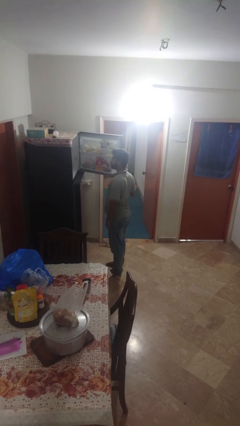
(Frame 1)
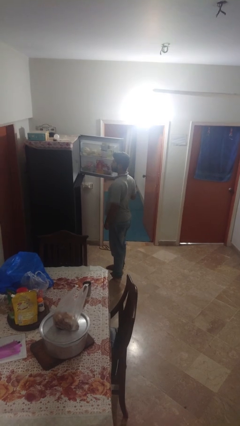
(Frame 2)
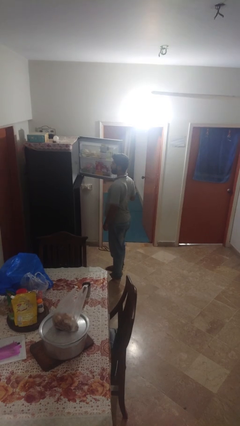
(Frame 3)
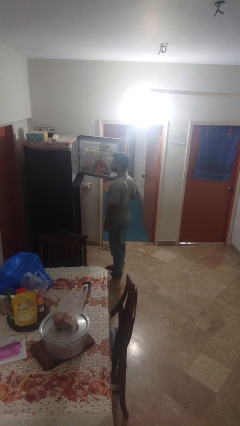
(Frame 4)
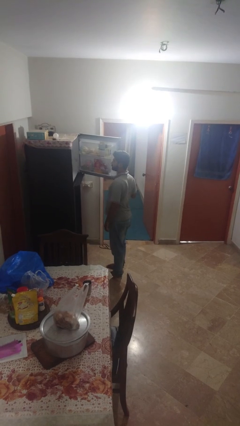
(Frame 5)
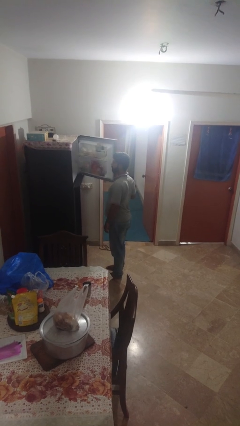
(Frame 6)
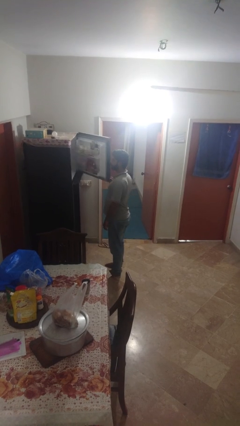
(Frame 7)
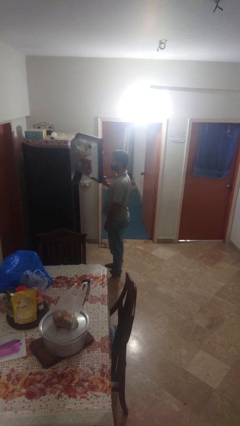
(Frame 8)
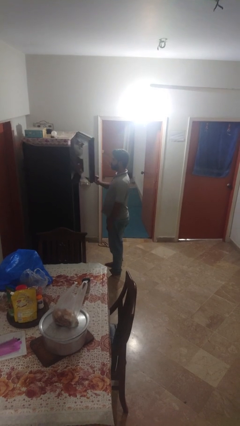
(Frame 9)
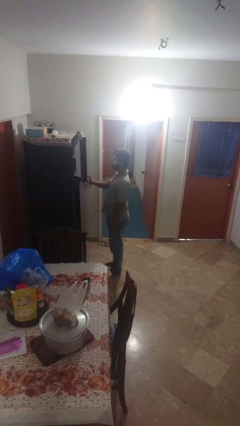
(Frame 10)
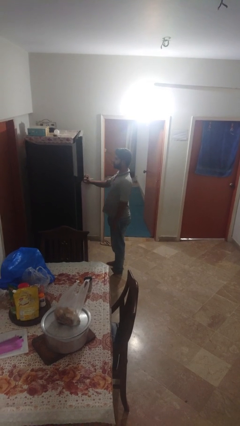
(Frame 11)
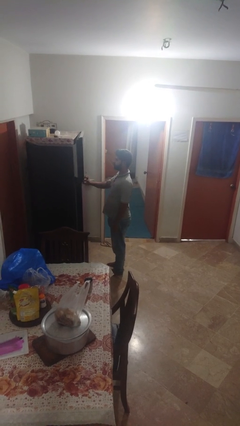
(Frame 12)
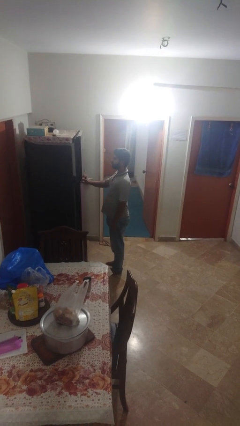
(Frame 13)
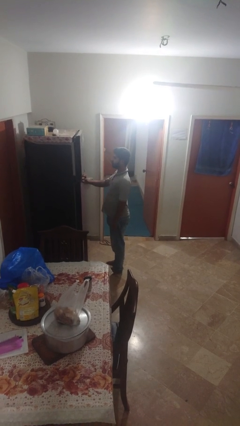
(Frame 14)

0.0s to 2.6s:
person closes refrigerator

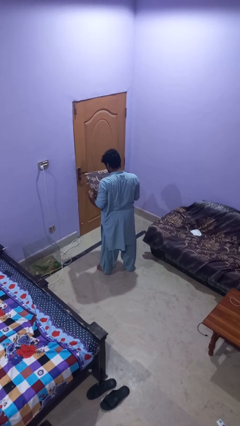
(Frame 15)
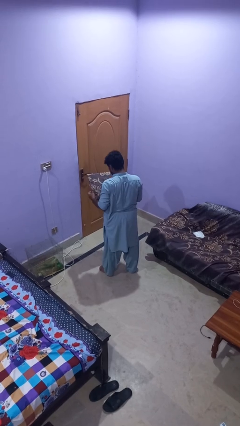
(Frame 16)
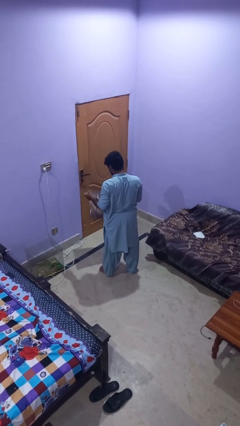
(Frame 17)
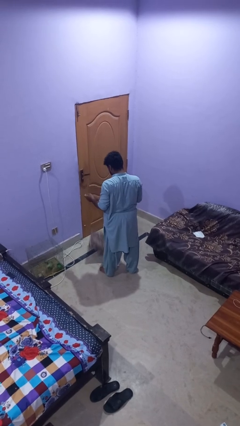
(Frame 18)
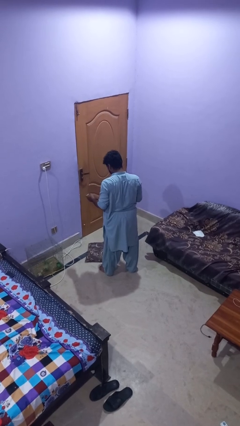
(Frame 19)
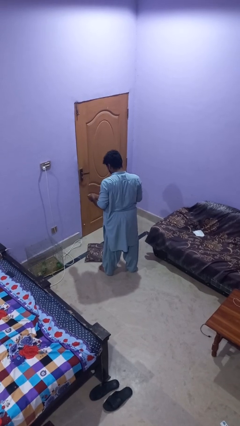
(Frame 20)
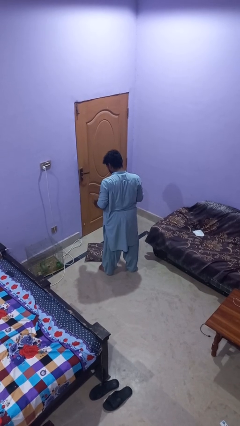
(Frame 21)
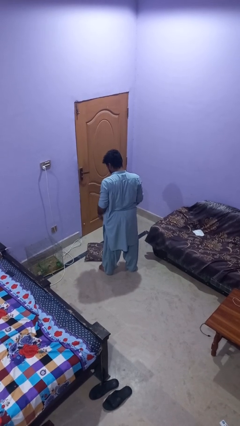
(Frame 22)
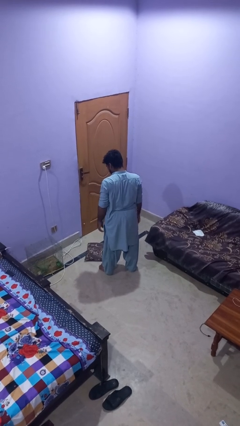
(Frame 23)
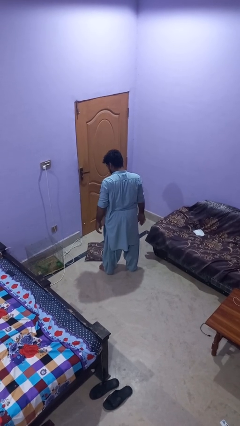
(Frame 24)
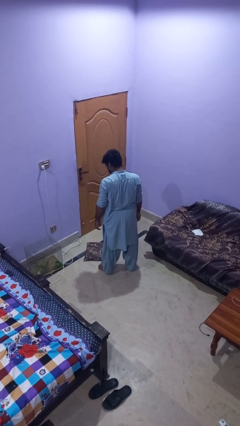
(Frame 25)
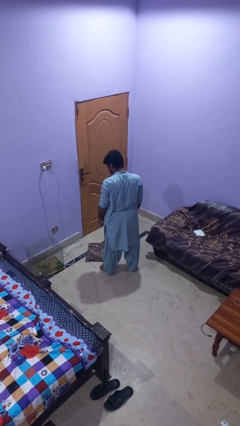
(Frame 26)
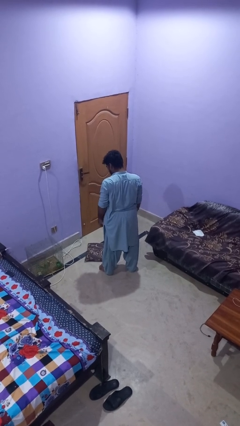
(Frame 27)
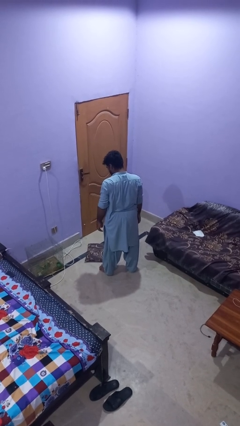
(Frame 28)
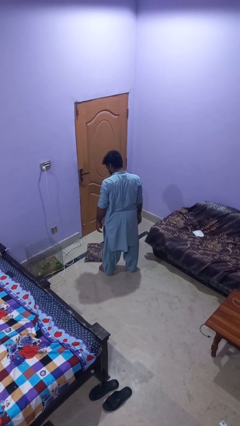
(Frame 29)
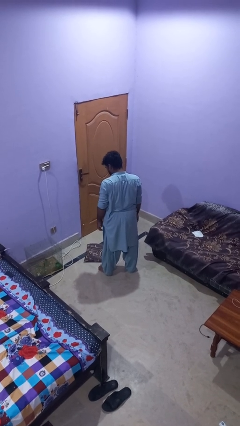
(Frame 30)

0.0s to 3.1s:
person drops object

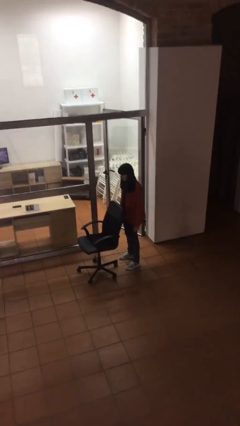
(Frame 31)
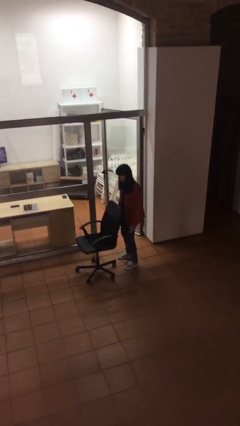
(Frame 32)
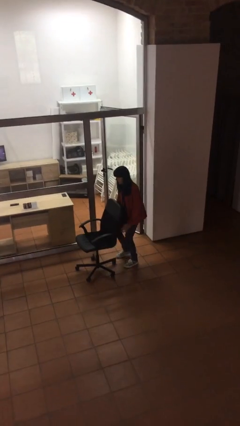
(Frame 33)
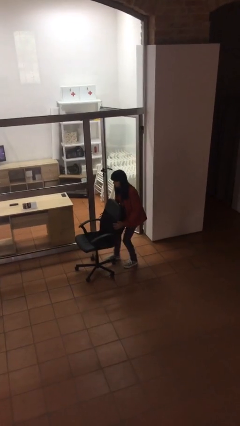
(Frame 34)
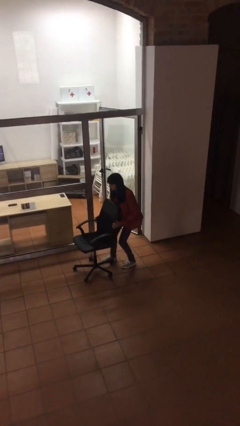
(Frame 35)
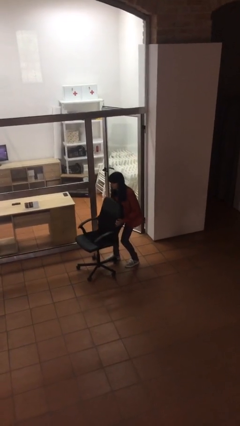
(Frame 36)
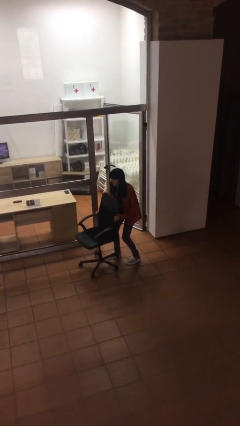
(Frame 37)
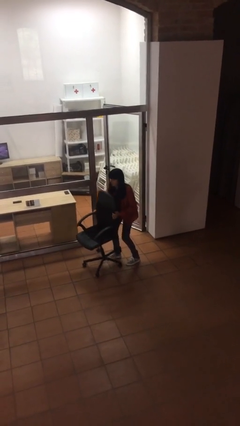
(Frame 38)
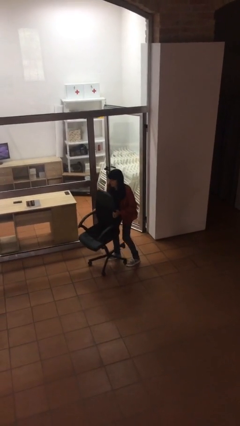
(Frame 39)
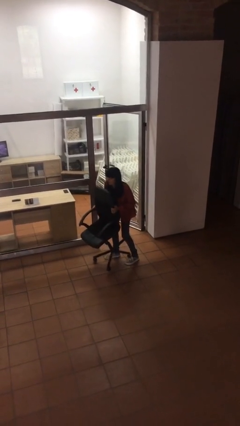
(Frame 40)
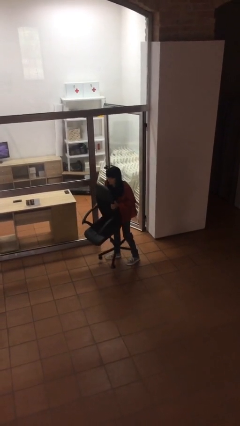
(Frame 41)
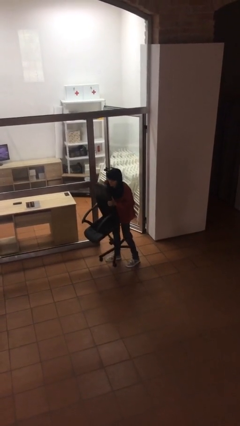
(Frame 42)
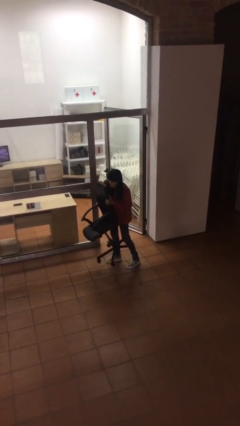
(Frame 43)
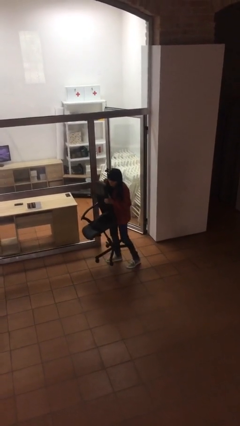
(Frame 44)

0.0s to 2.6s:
person picks up object from floor

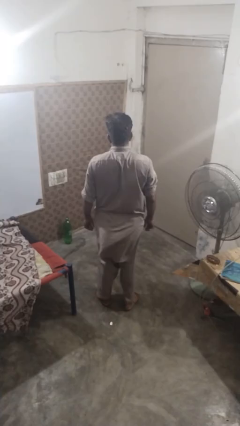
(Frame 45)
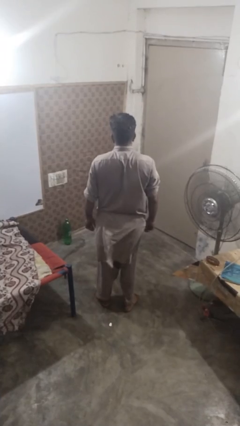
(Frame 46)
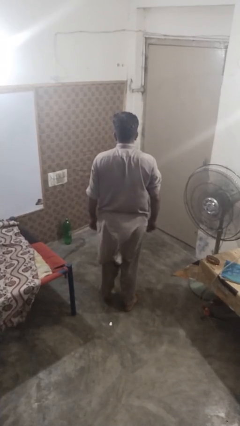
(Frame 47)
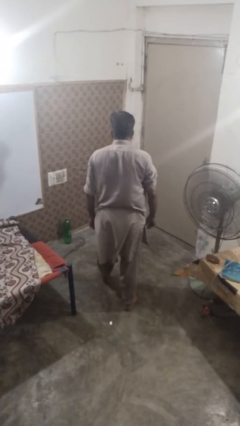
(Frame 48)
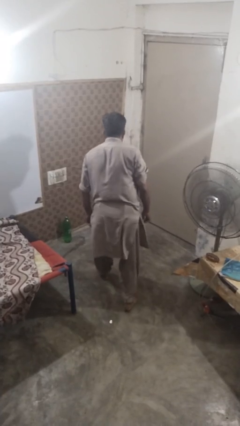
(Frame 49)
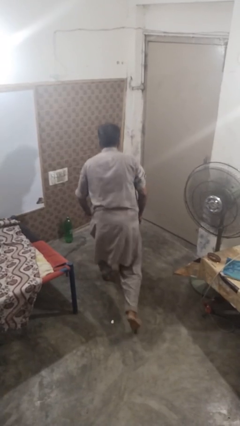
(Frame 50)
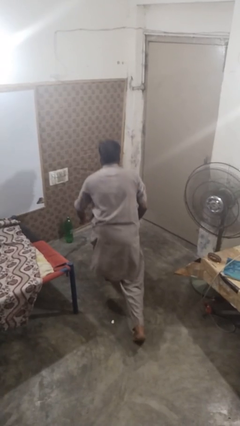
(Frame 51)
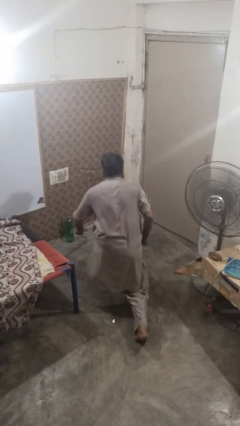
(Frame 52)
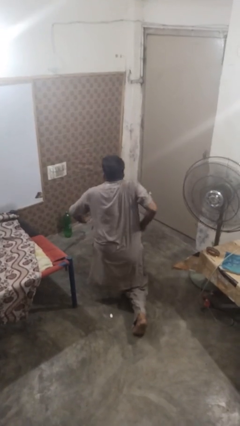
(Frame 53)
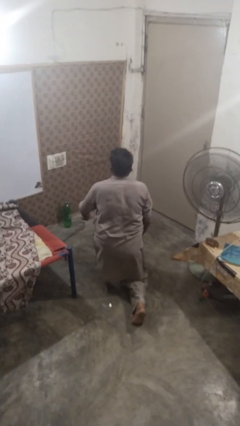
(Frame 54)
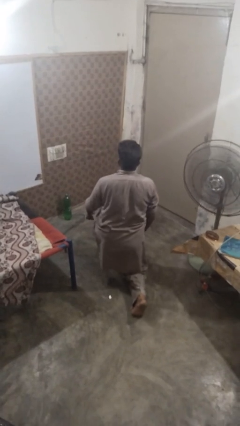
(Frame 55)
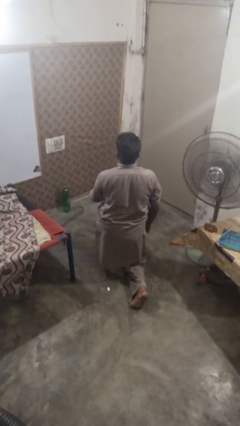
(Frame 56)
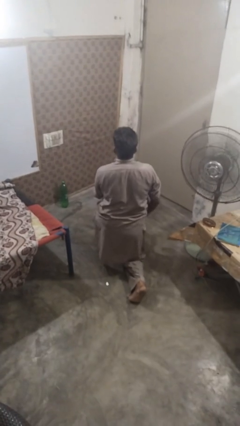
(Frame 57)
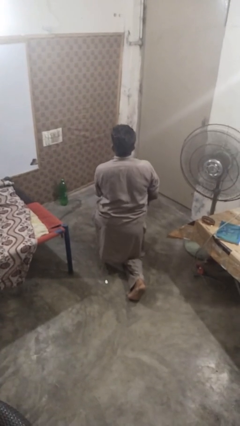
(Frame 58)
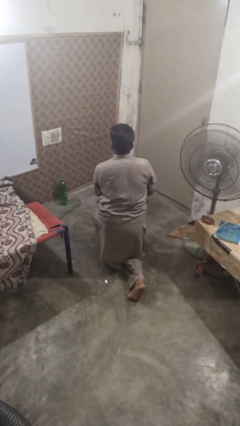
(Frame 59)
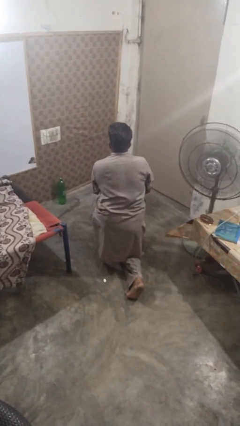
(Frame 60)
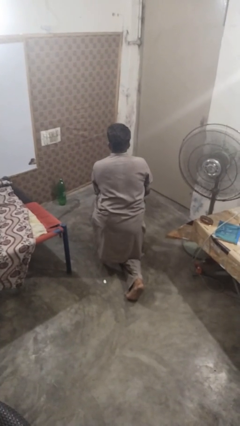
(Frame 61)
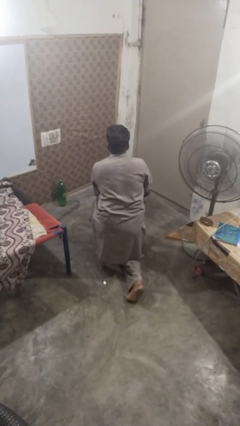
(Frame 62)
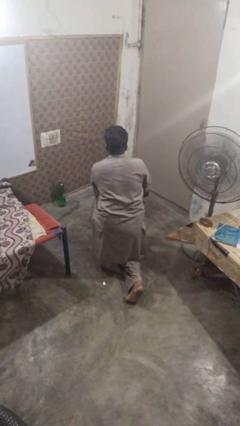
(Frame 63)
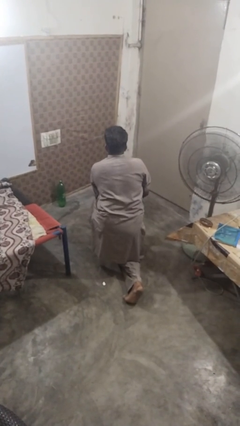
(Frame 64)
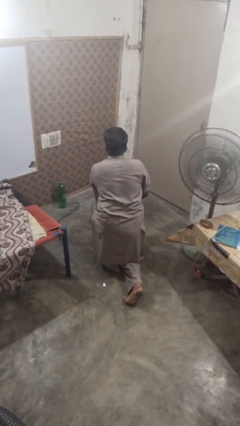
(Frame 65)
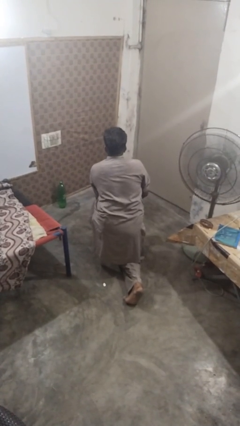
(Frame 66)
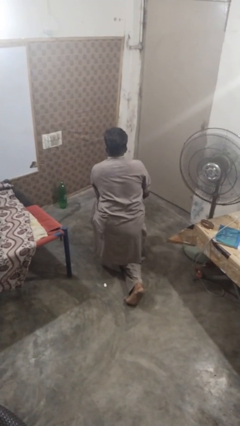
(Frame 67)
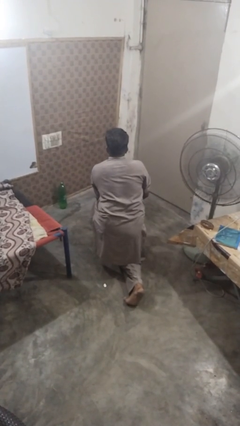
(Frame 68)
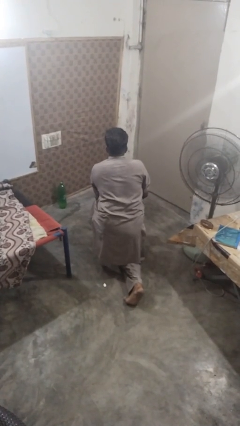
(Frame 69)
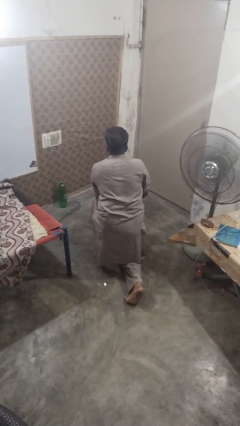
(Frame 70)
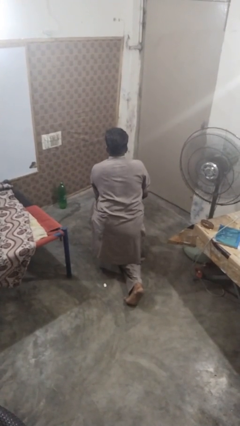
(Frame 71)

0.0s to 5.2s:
person kneels

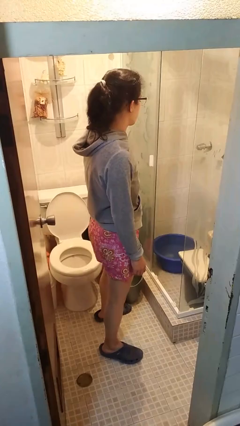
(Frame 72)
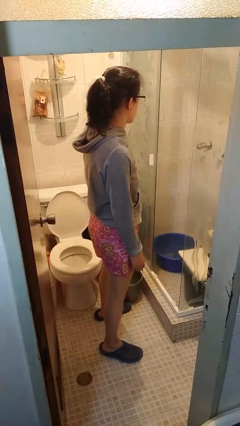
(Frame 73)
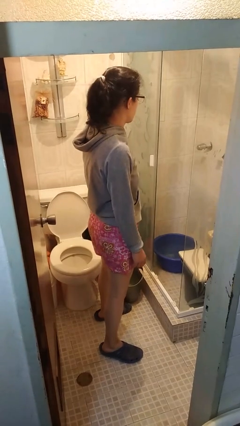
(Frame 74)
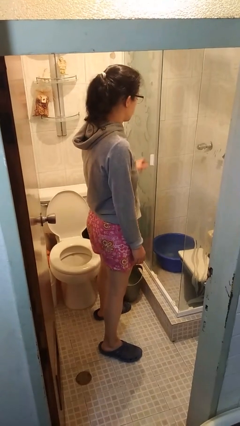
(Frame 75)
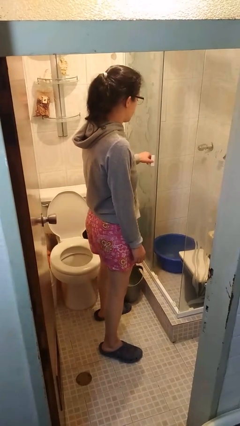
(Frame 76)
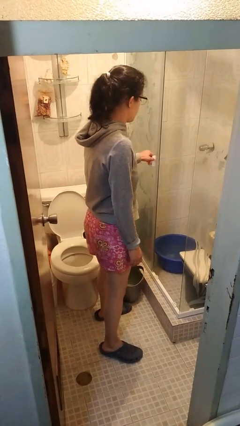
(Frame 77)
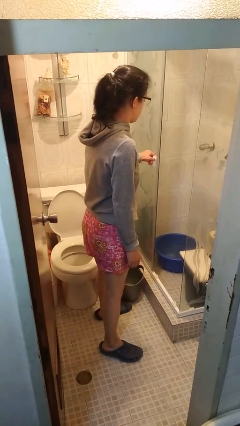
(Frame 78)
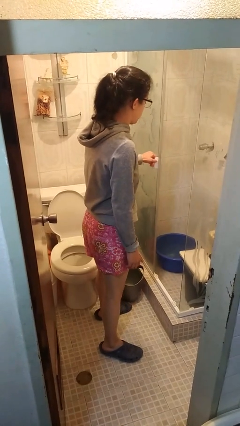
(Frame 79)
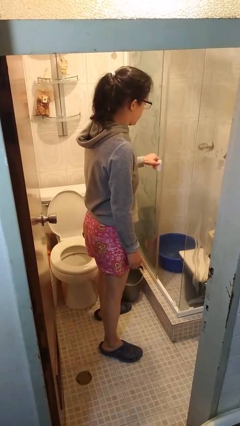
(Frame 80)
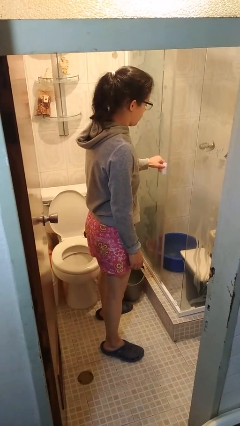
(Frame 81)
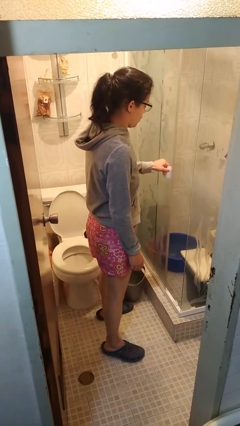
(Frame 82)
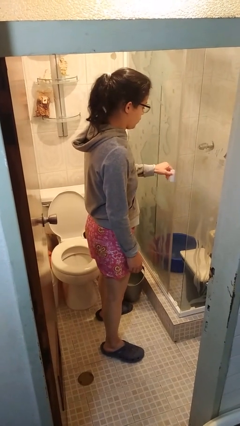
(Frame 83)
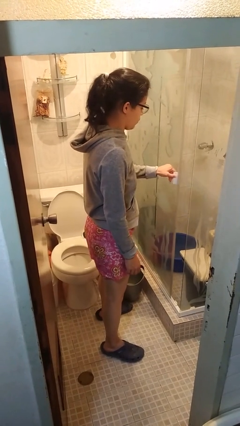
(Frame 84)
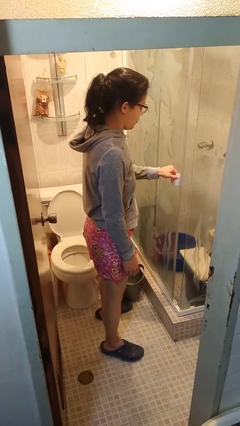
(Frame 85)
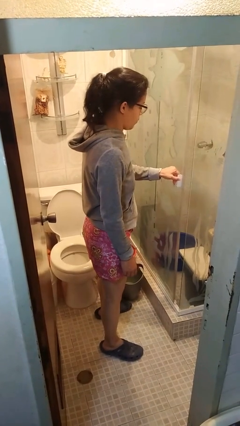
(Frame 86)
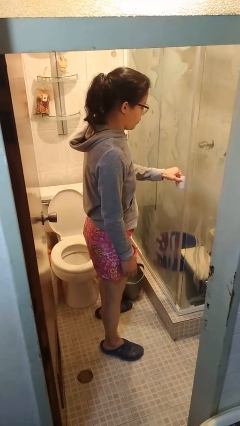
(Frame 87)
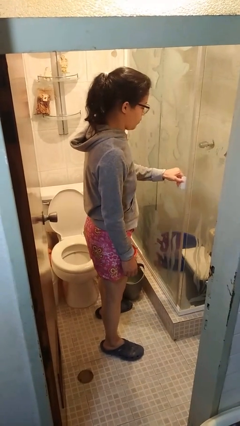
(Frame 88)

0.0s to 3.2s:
person closes sliding door

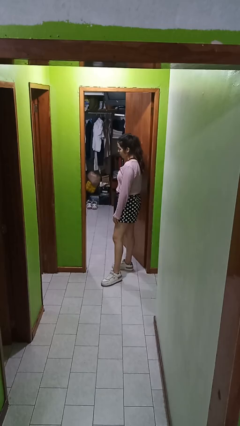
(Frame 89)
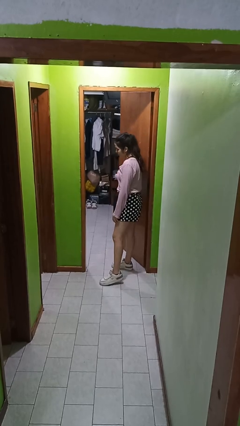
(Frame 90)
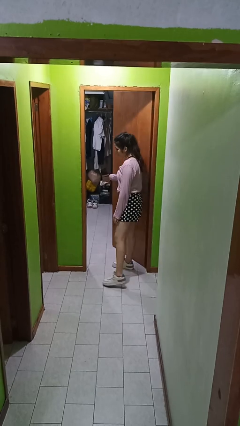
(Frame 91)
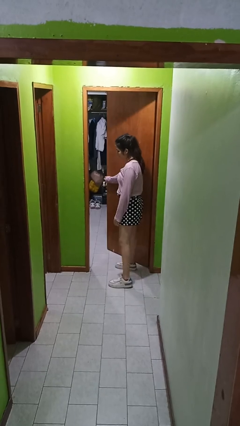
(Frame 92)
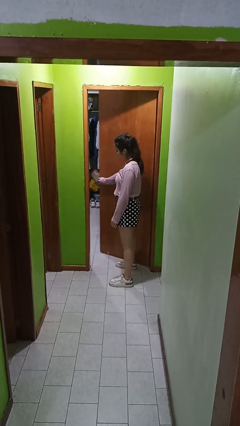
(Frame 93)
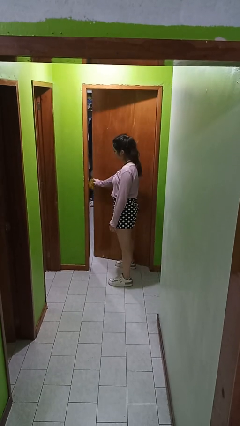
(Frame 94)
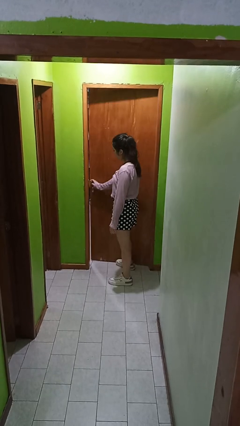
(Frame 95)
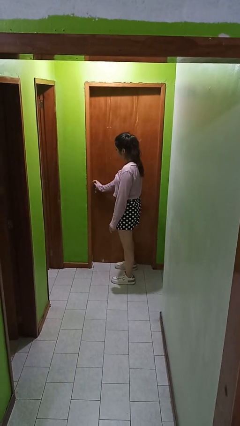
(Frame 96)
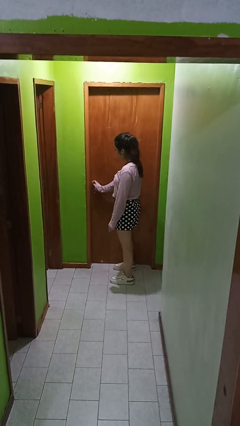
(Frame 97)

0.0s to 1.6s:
person closes facility door
